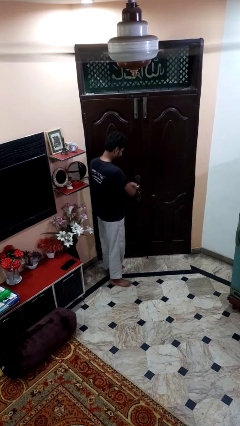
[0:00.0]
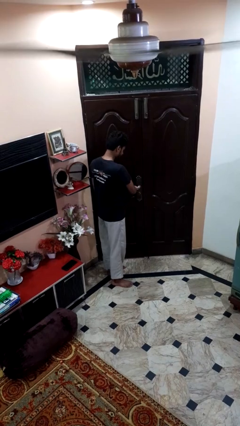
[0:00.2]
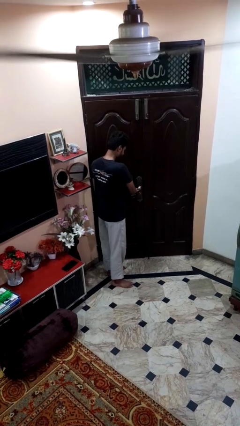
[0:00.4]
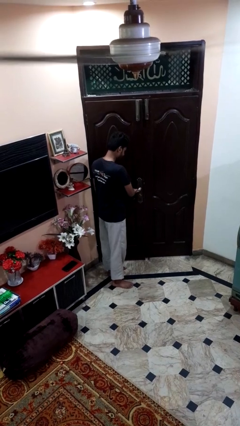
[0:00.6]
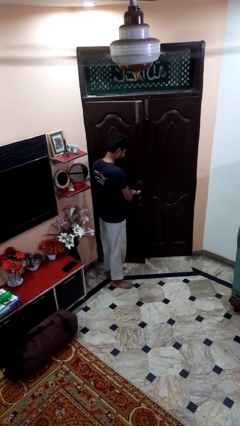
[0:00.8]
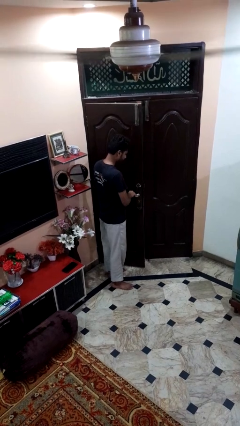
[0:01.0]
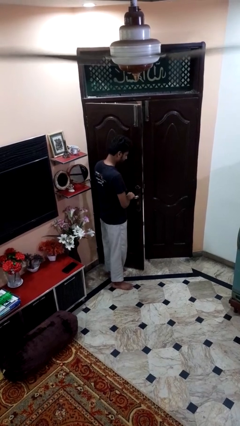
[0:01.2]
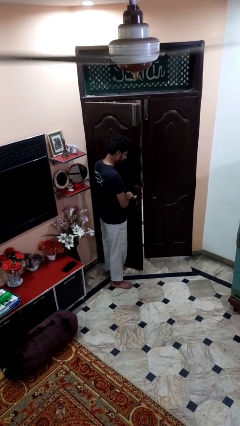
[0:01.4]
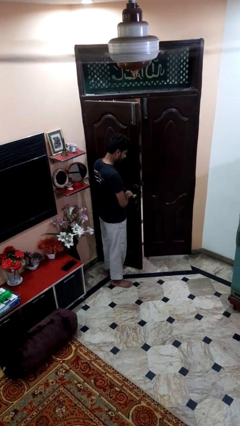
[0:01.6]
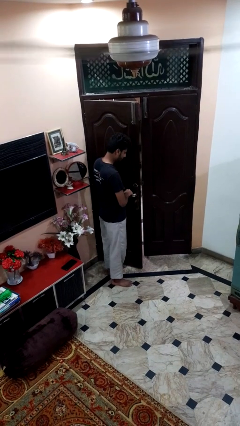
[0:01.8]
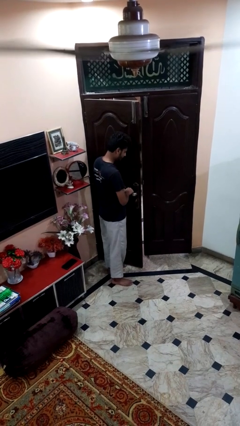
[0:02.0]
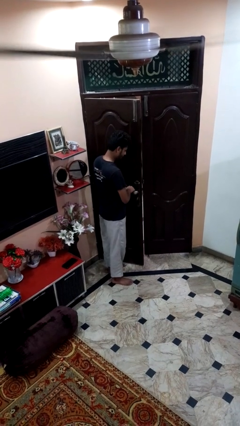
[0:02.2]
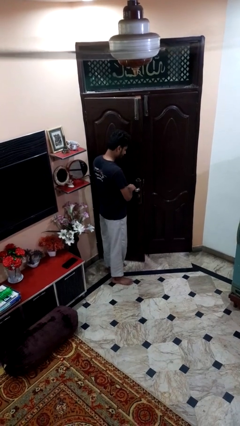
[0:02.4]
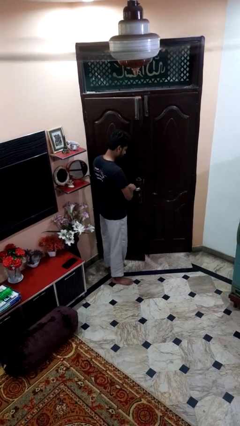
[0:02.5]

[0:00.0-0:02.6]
person opens facility door

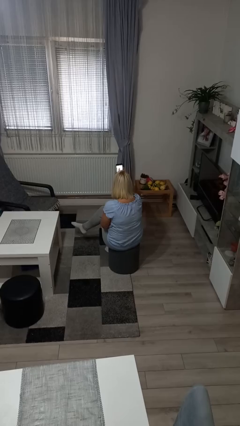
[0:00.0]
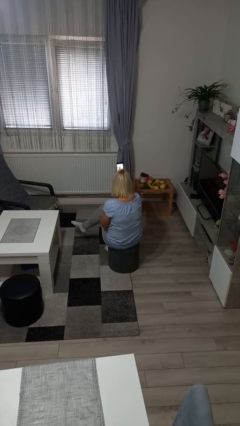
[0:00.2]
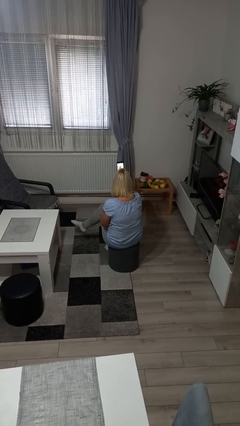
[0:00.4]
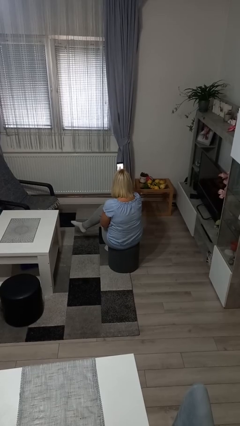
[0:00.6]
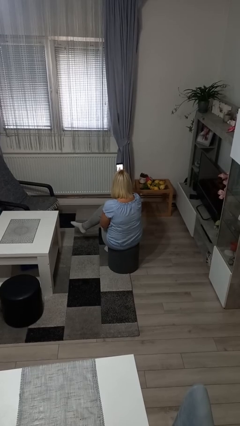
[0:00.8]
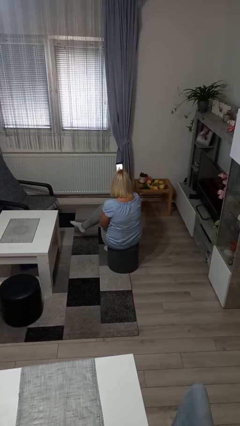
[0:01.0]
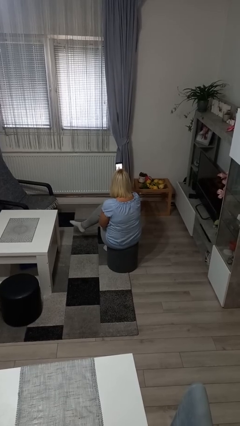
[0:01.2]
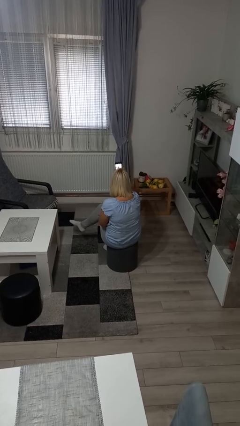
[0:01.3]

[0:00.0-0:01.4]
person takes selfie

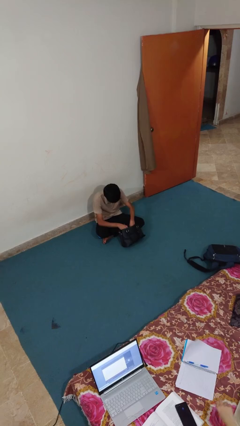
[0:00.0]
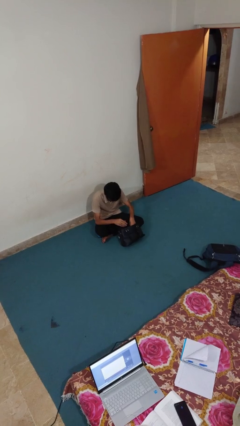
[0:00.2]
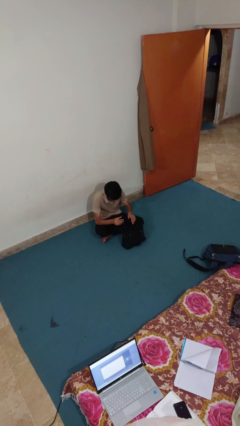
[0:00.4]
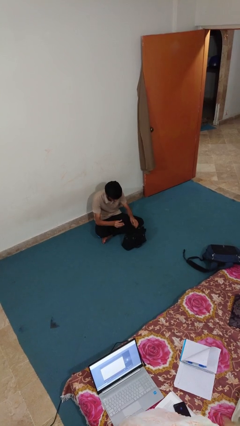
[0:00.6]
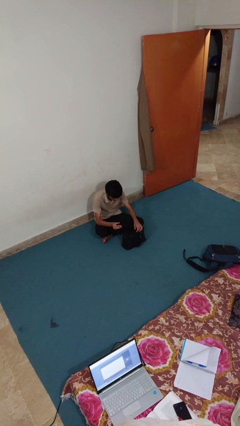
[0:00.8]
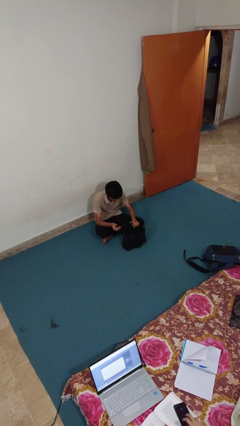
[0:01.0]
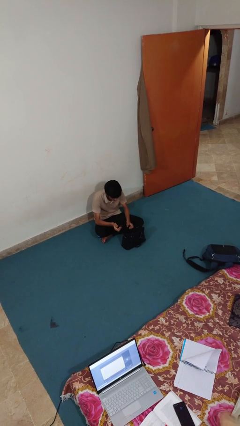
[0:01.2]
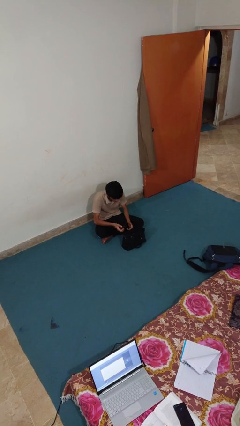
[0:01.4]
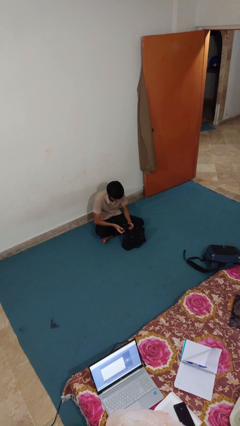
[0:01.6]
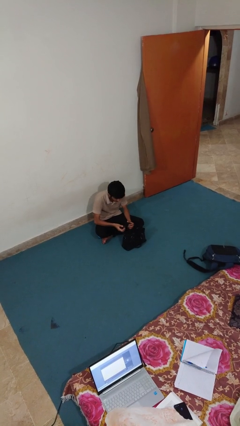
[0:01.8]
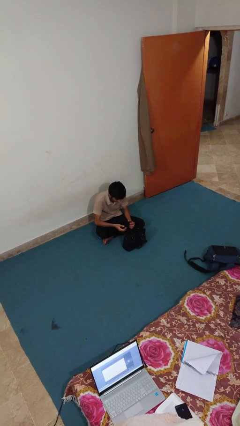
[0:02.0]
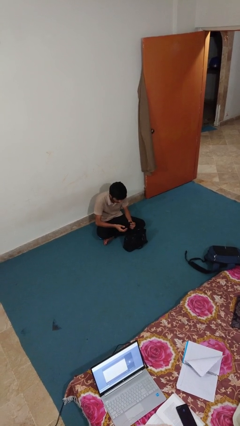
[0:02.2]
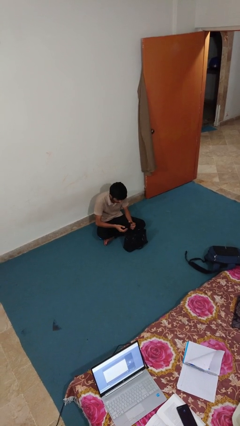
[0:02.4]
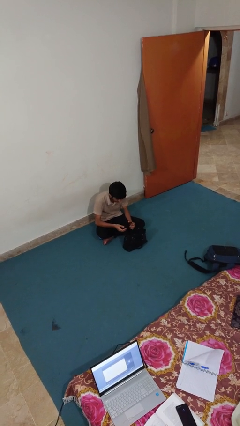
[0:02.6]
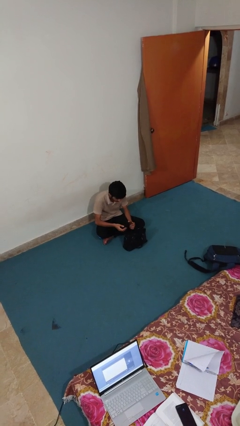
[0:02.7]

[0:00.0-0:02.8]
person takes object from purse

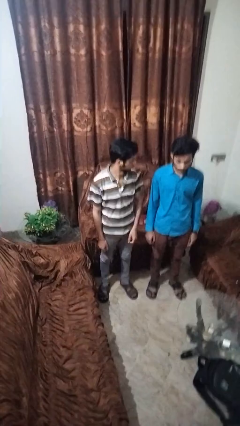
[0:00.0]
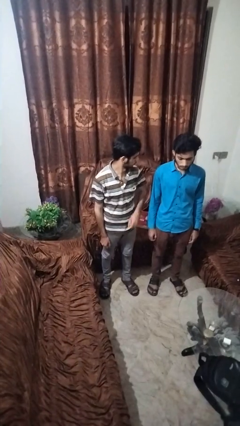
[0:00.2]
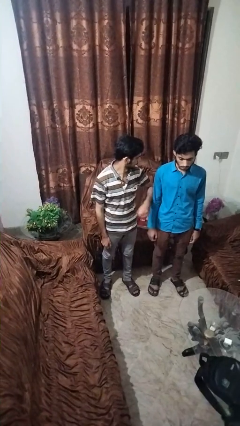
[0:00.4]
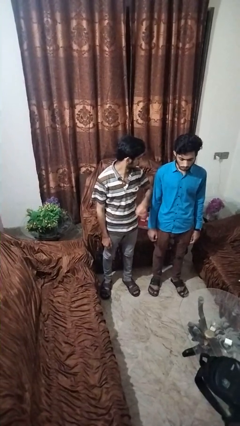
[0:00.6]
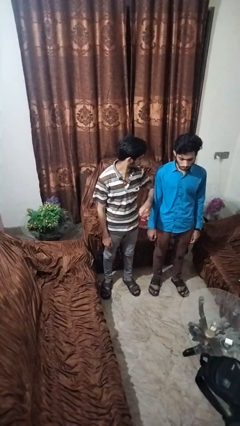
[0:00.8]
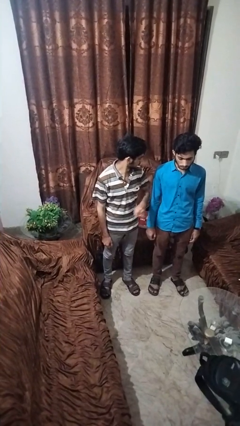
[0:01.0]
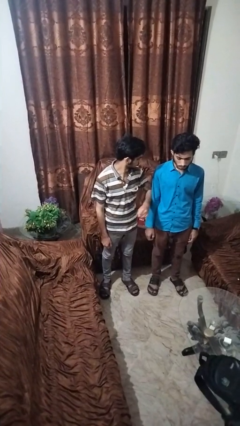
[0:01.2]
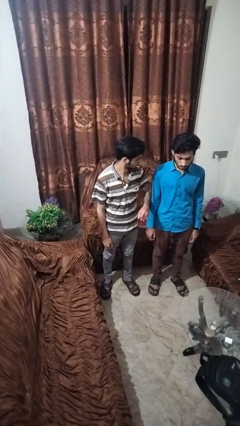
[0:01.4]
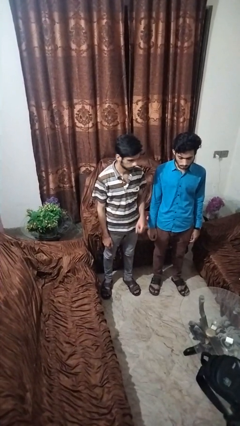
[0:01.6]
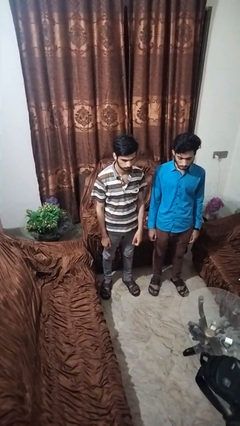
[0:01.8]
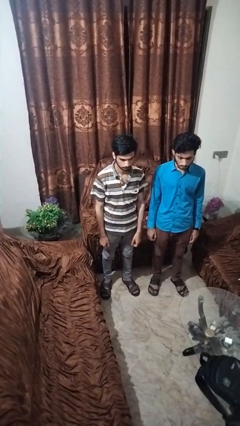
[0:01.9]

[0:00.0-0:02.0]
person nudges person with elbow

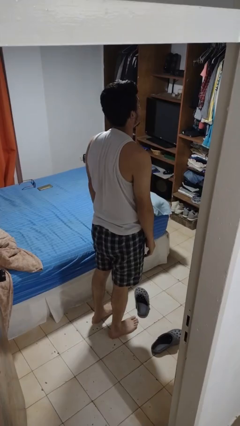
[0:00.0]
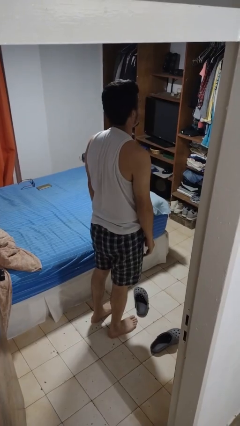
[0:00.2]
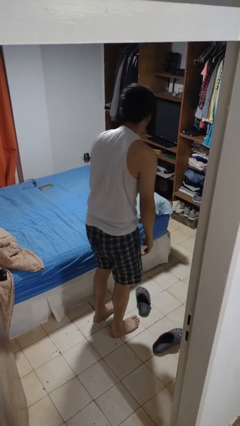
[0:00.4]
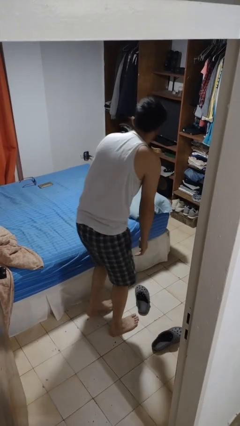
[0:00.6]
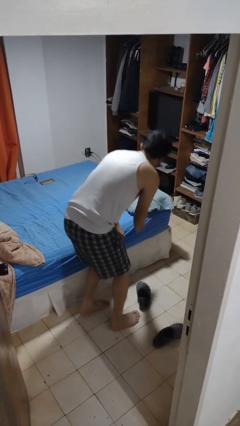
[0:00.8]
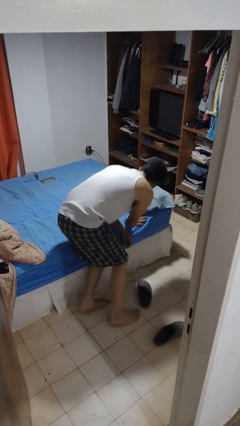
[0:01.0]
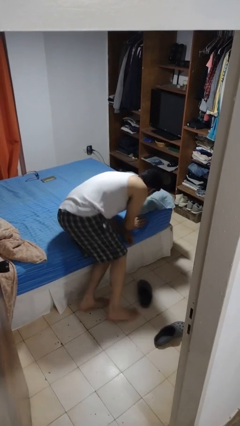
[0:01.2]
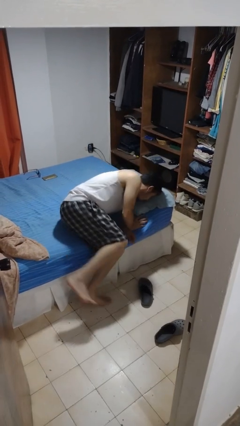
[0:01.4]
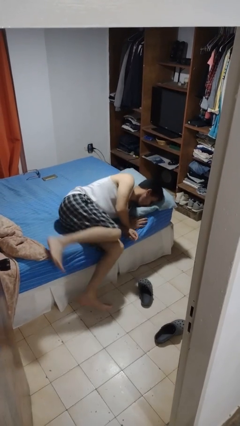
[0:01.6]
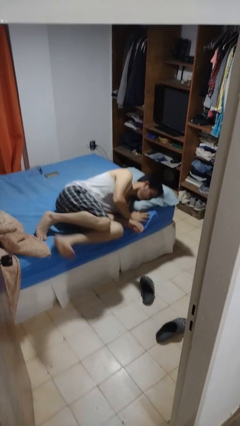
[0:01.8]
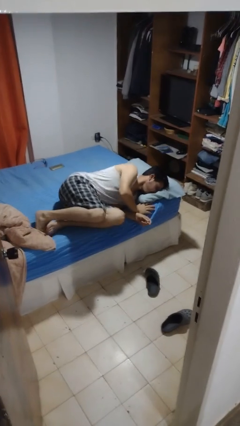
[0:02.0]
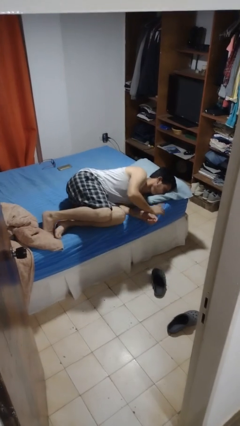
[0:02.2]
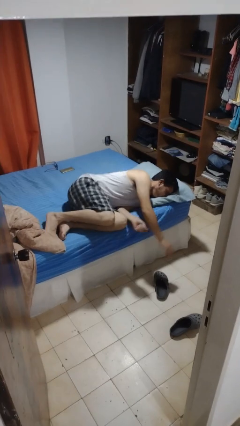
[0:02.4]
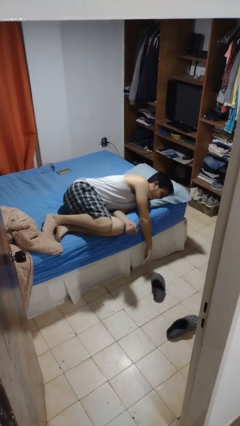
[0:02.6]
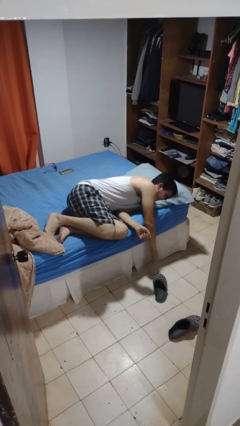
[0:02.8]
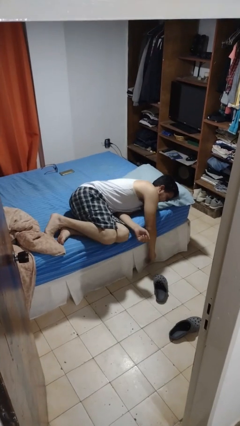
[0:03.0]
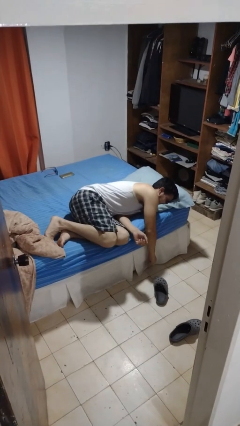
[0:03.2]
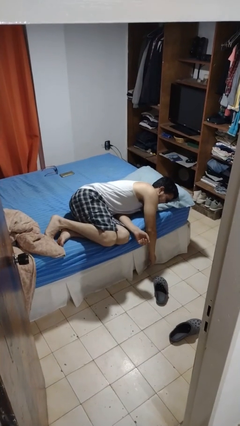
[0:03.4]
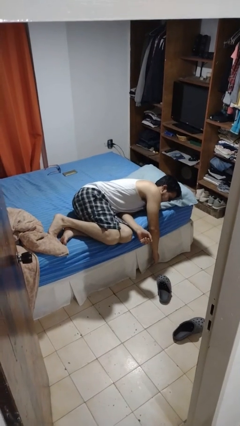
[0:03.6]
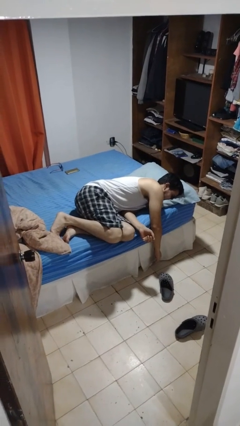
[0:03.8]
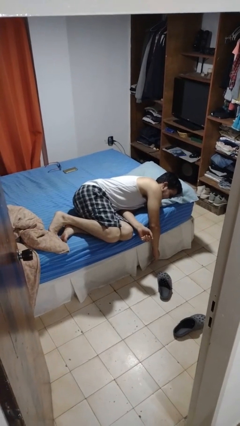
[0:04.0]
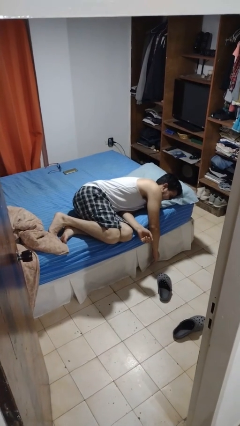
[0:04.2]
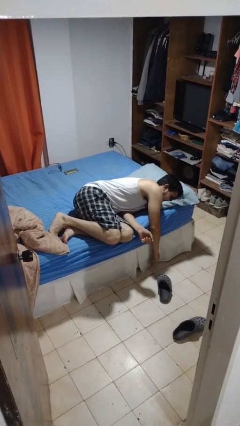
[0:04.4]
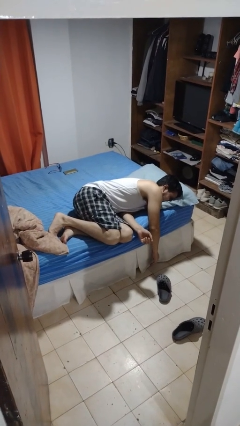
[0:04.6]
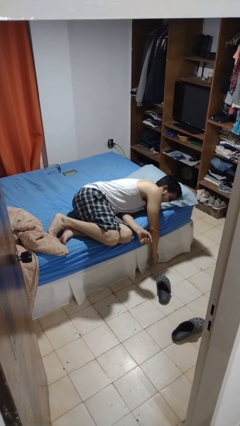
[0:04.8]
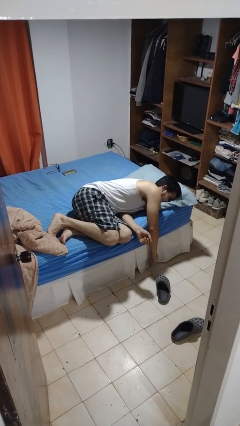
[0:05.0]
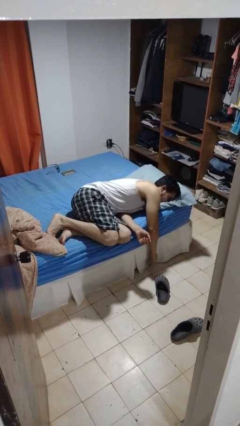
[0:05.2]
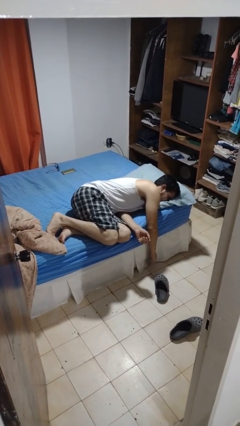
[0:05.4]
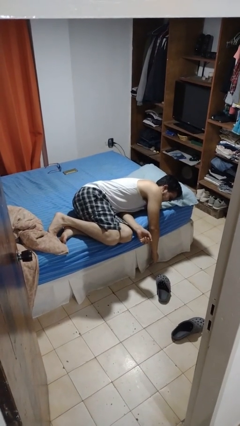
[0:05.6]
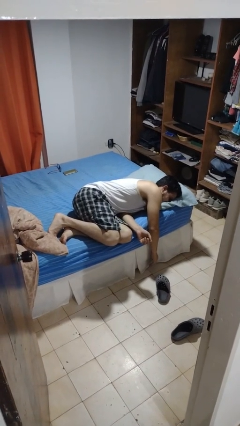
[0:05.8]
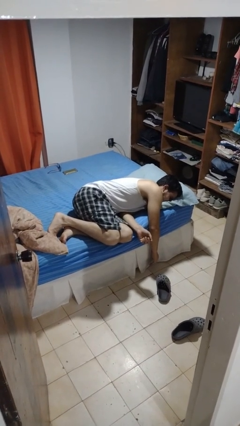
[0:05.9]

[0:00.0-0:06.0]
person lies down on bed

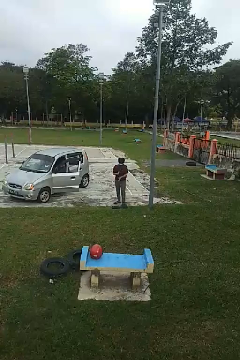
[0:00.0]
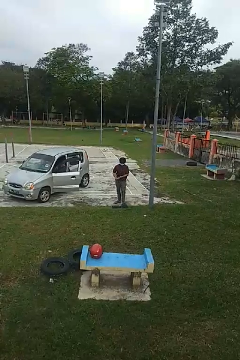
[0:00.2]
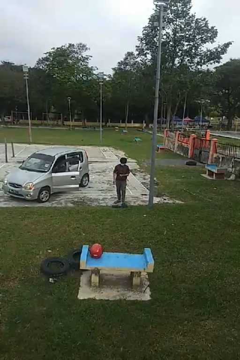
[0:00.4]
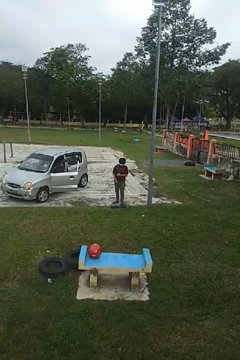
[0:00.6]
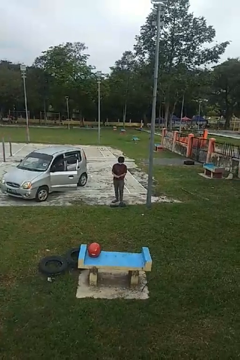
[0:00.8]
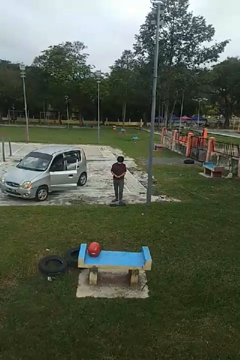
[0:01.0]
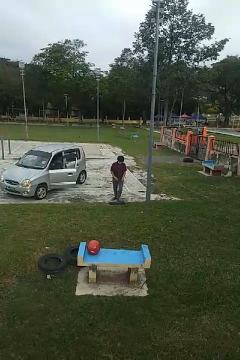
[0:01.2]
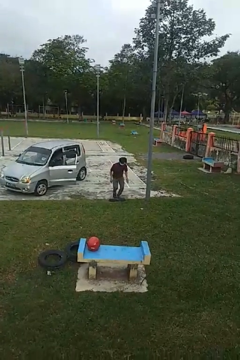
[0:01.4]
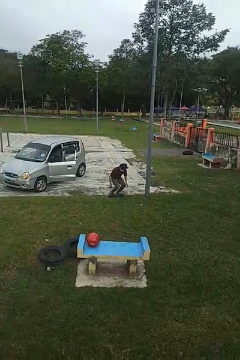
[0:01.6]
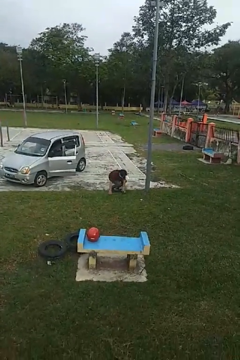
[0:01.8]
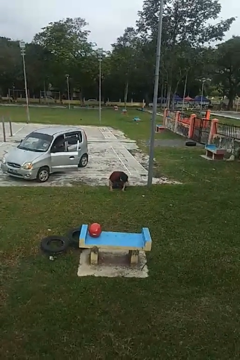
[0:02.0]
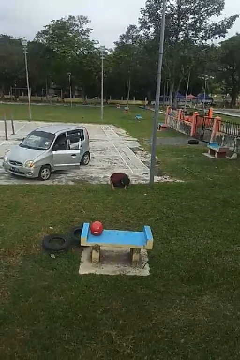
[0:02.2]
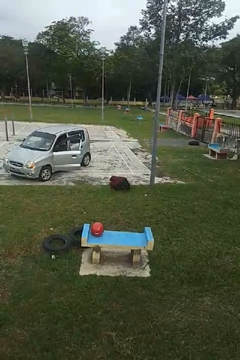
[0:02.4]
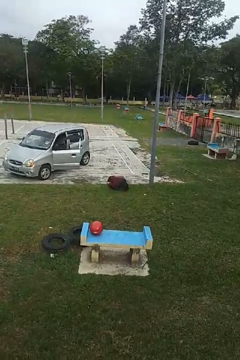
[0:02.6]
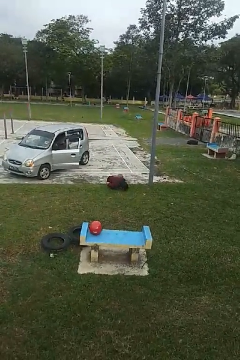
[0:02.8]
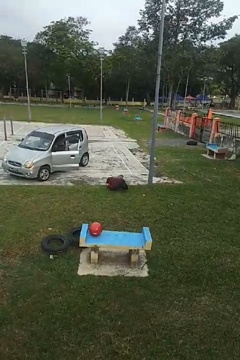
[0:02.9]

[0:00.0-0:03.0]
person trips on object on floor
